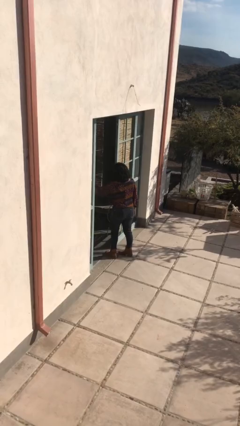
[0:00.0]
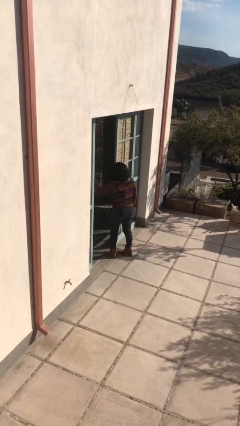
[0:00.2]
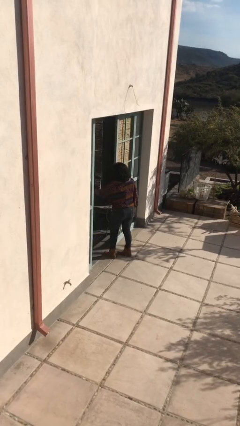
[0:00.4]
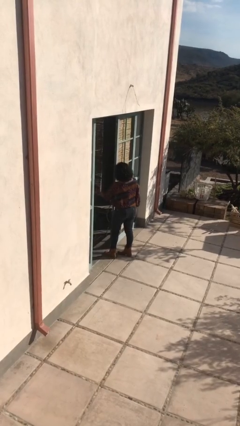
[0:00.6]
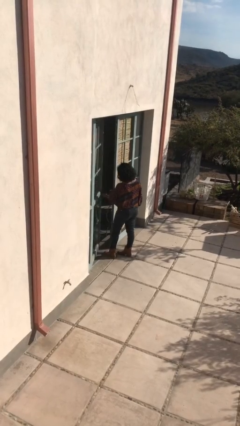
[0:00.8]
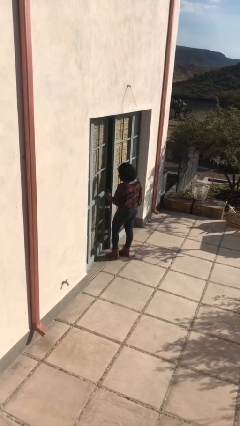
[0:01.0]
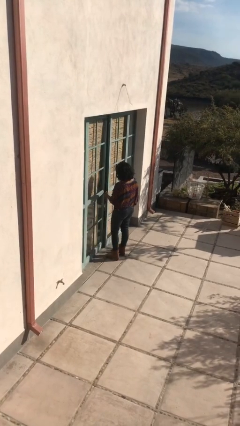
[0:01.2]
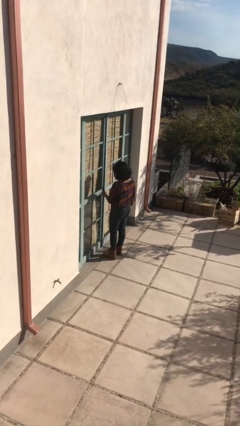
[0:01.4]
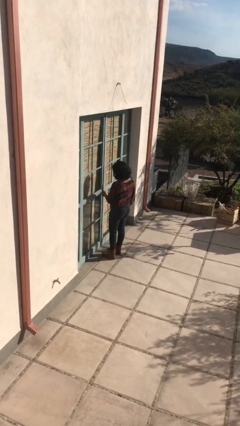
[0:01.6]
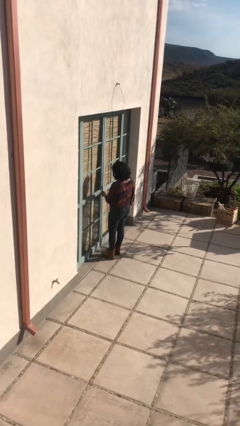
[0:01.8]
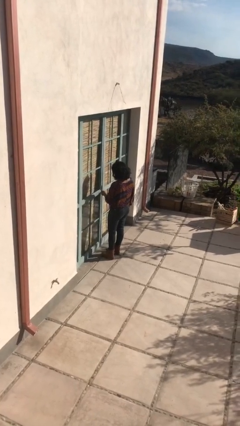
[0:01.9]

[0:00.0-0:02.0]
person closes facility door

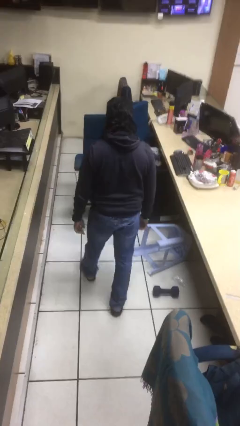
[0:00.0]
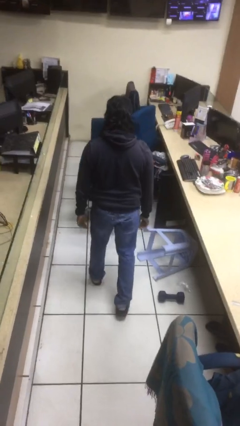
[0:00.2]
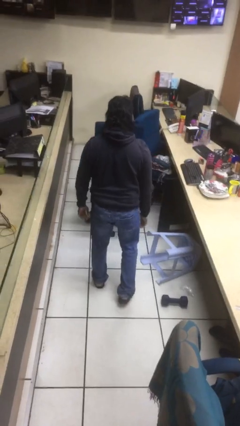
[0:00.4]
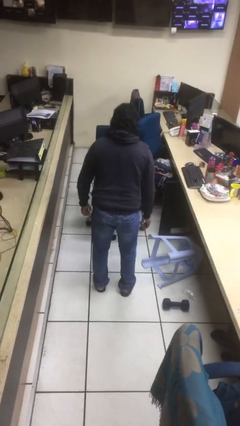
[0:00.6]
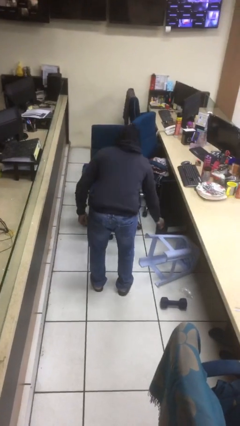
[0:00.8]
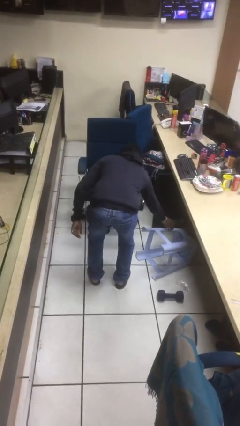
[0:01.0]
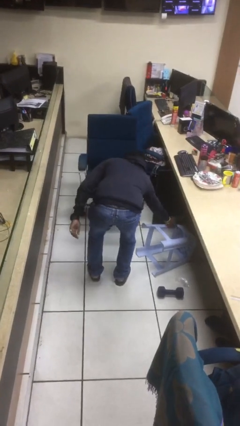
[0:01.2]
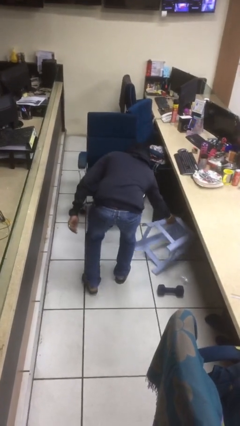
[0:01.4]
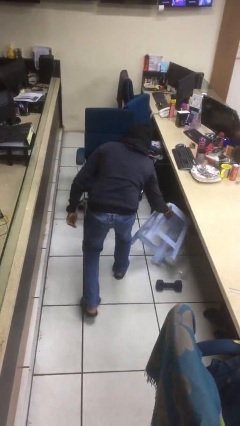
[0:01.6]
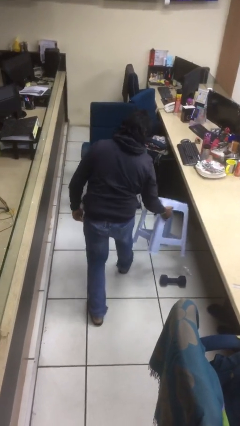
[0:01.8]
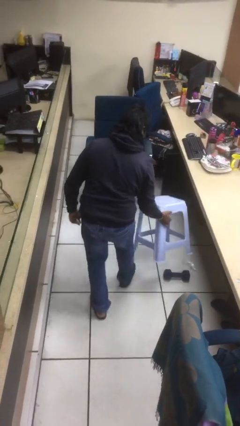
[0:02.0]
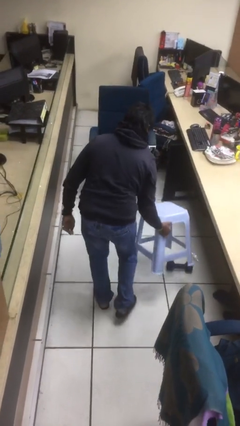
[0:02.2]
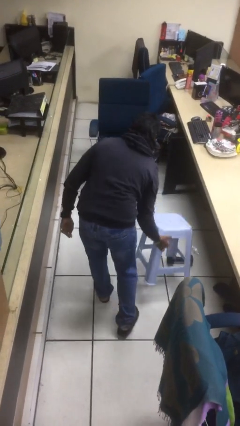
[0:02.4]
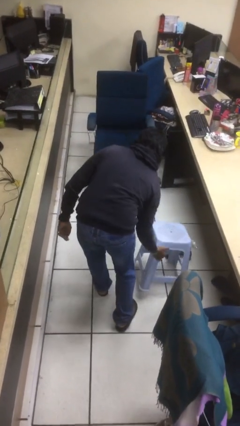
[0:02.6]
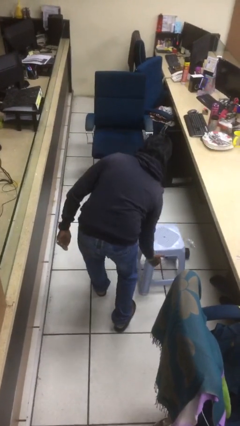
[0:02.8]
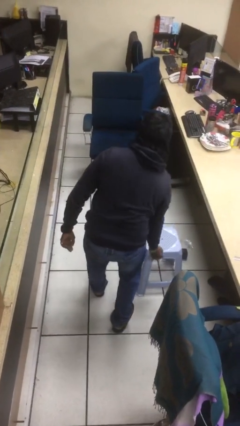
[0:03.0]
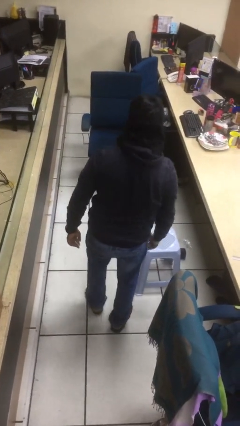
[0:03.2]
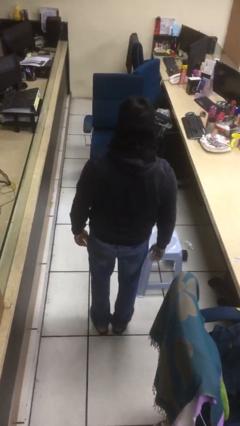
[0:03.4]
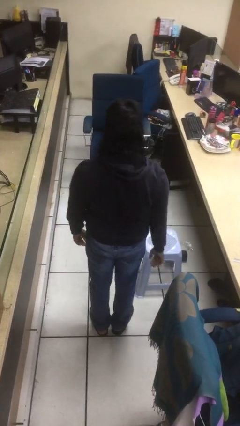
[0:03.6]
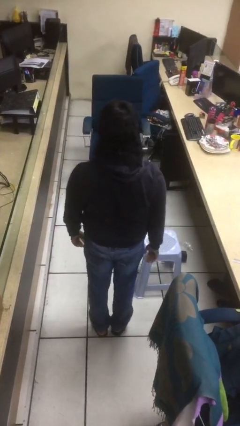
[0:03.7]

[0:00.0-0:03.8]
person sets upright furniture

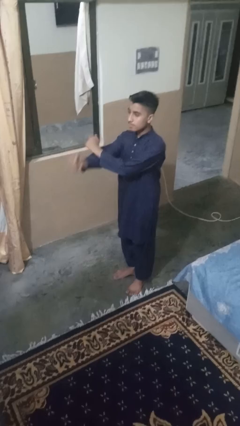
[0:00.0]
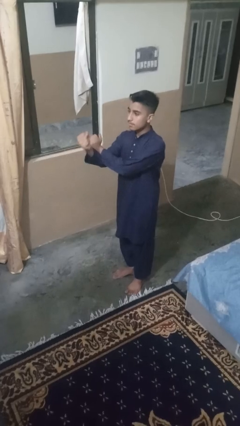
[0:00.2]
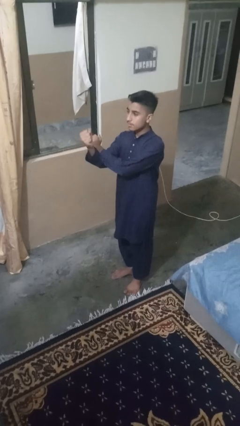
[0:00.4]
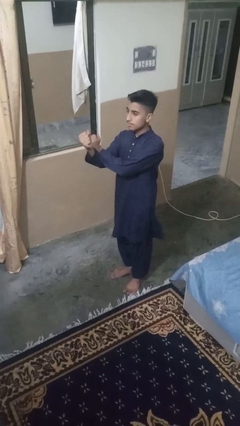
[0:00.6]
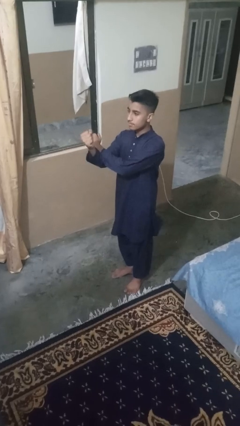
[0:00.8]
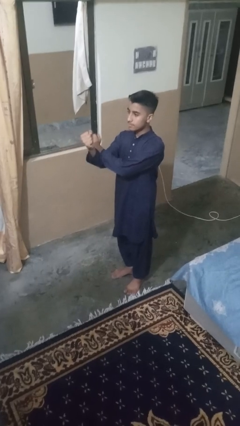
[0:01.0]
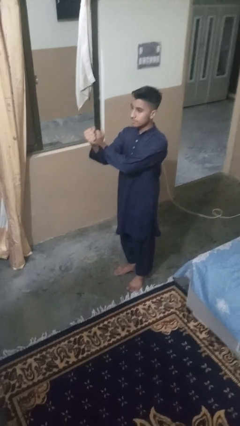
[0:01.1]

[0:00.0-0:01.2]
person crosses arms

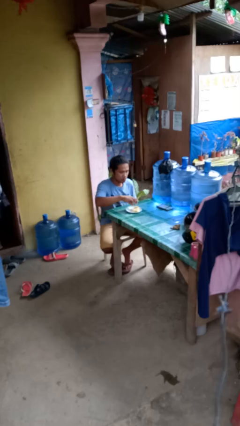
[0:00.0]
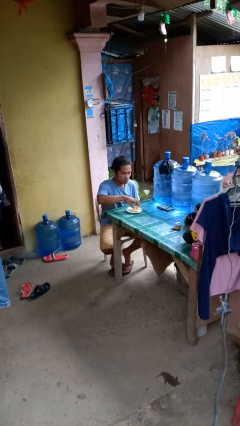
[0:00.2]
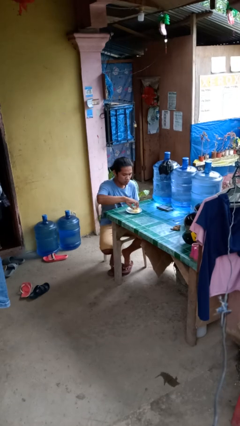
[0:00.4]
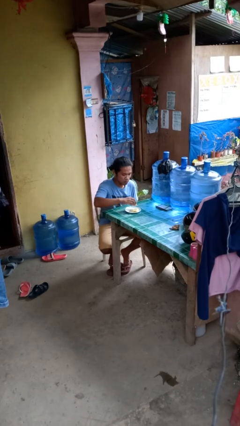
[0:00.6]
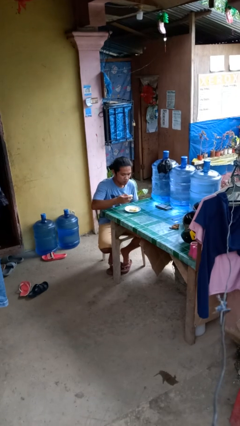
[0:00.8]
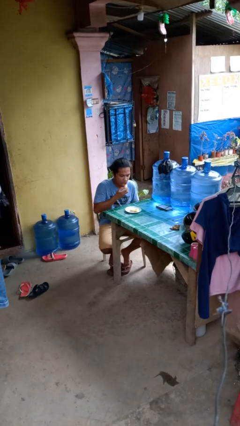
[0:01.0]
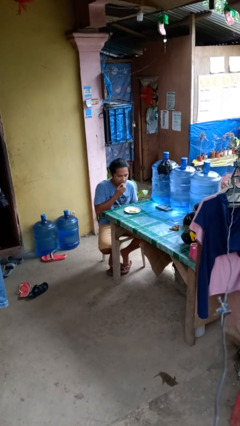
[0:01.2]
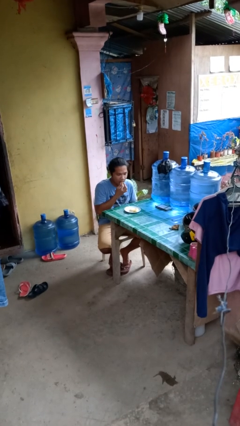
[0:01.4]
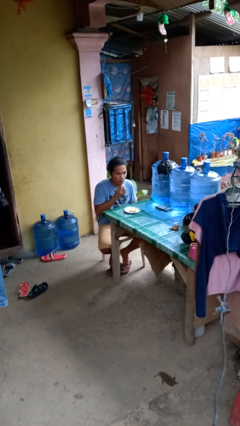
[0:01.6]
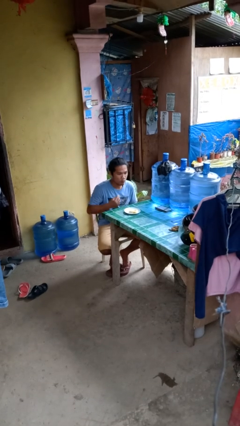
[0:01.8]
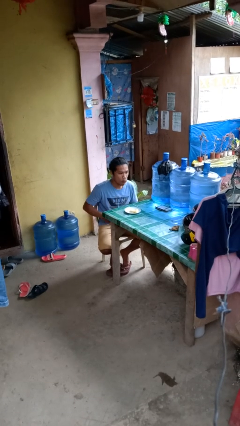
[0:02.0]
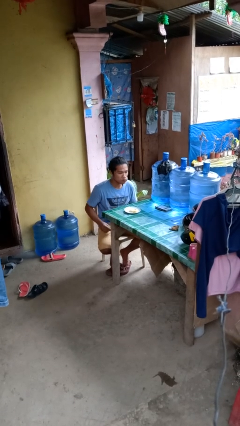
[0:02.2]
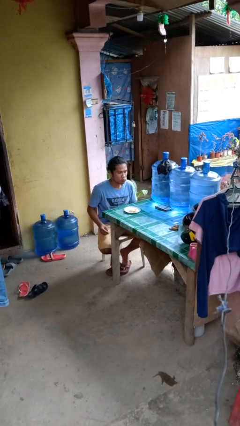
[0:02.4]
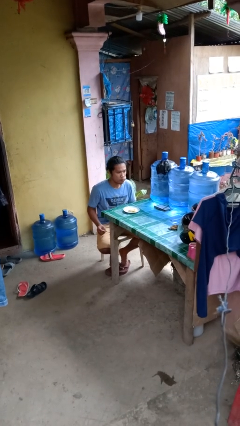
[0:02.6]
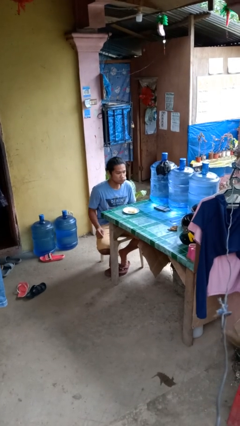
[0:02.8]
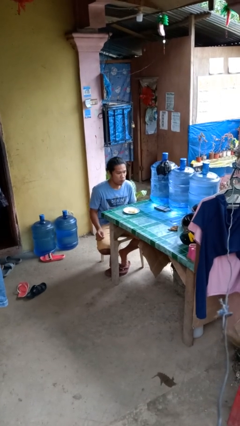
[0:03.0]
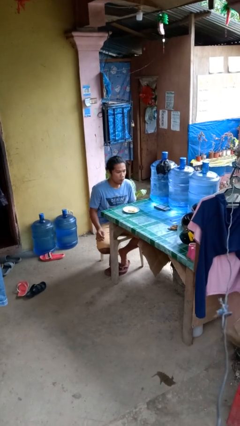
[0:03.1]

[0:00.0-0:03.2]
person eats with hands

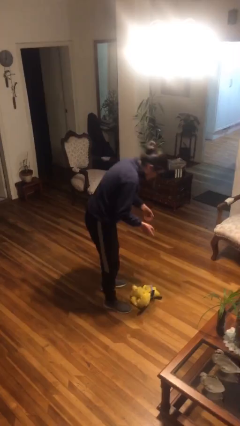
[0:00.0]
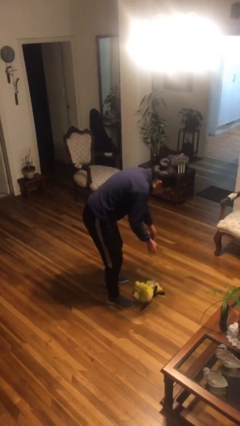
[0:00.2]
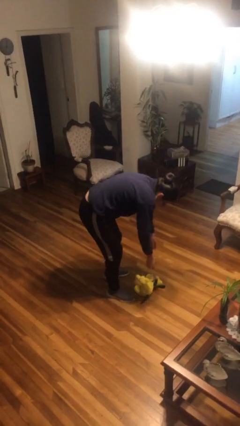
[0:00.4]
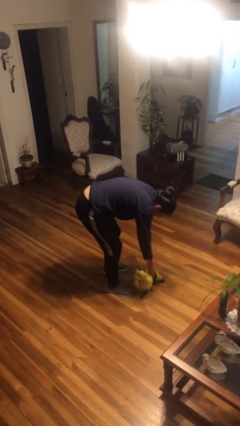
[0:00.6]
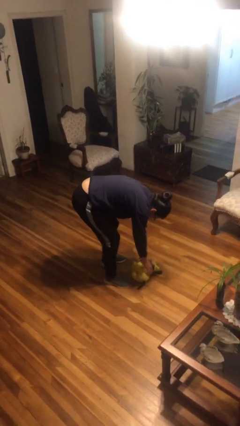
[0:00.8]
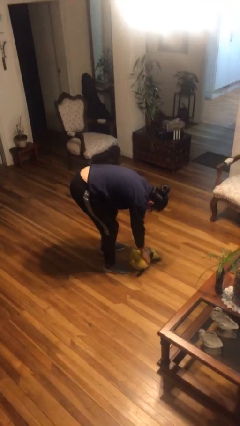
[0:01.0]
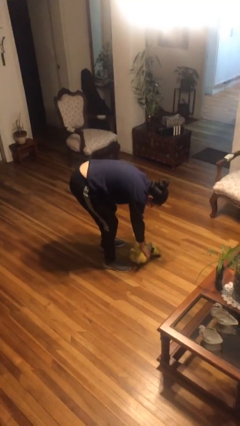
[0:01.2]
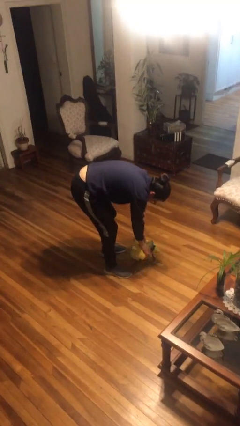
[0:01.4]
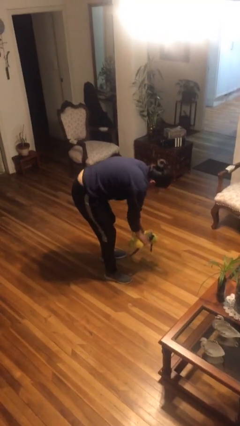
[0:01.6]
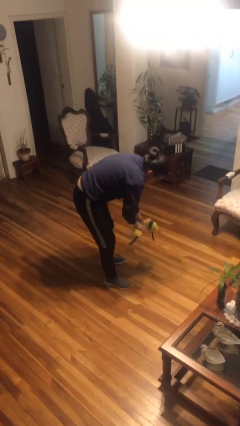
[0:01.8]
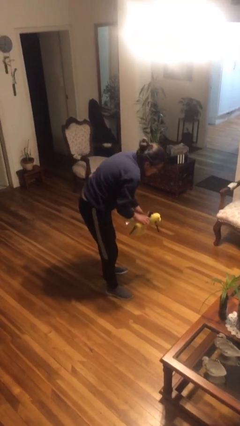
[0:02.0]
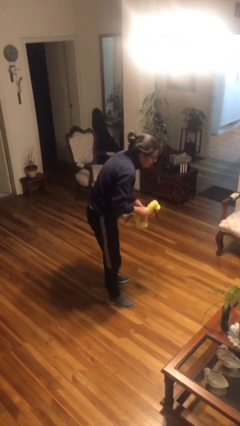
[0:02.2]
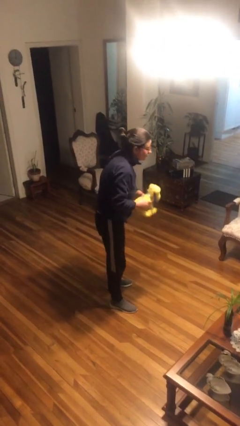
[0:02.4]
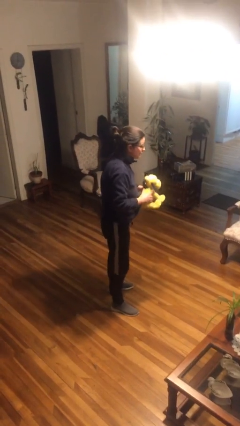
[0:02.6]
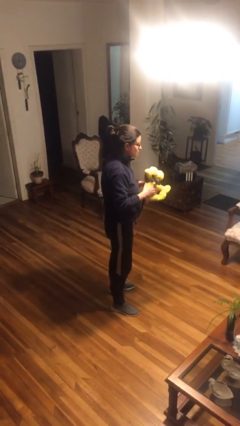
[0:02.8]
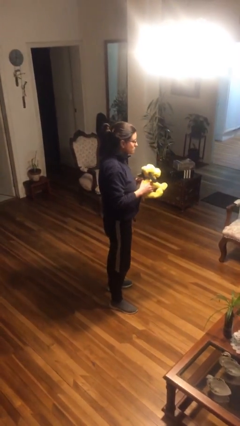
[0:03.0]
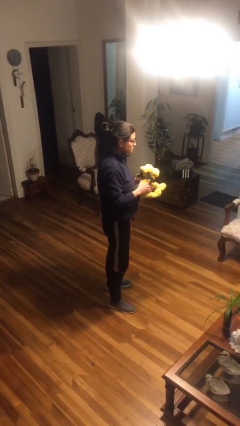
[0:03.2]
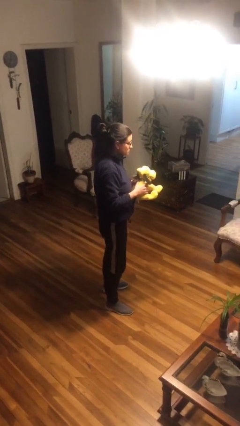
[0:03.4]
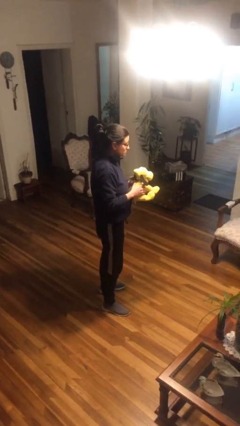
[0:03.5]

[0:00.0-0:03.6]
person picks up object from floor

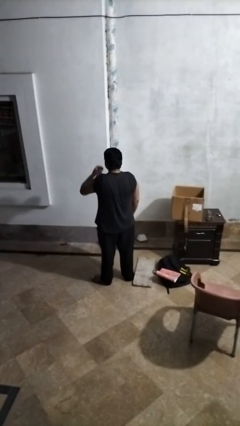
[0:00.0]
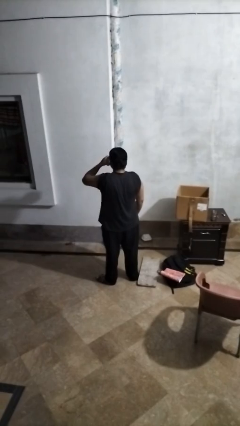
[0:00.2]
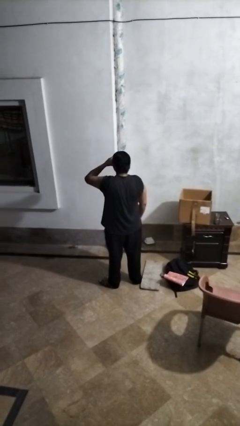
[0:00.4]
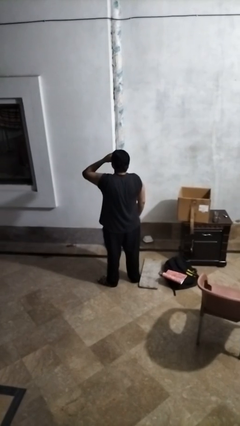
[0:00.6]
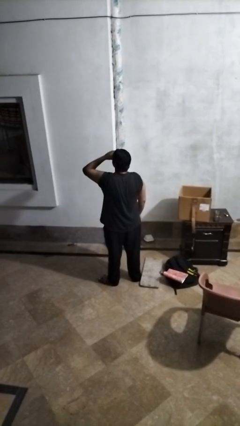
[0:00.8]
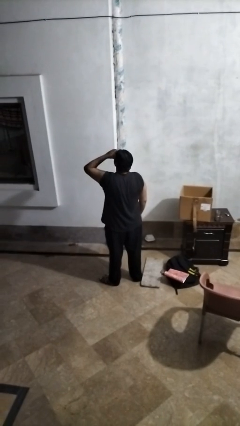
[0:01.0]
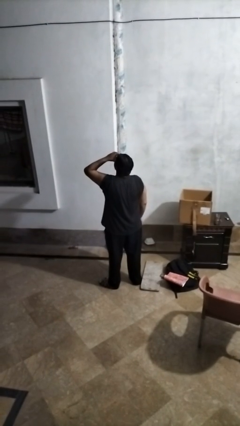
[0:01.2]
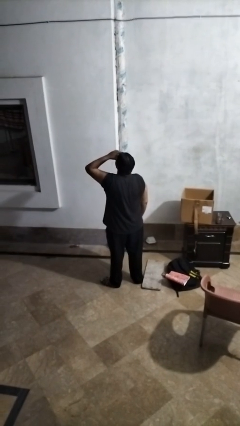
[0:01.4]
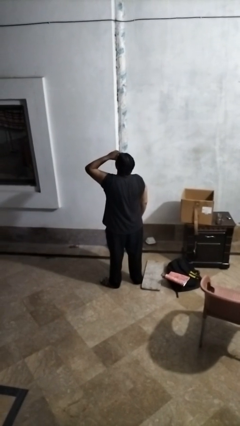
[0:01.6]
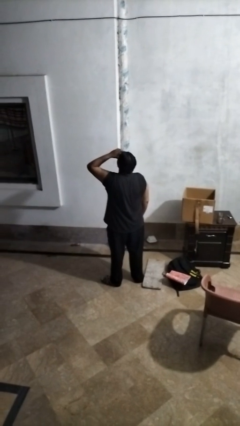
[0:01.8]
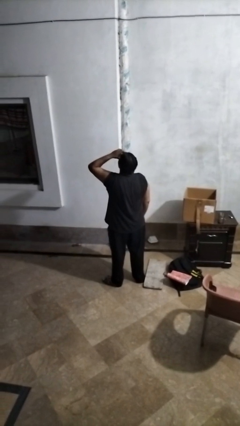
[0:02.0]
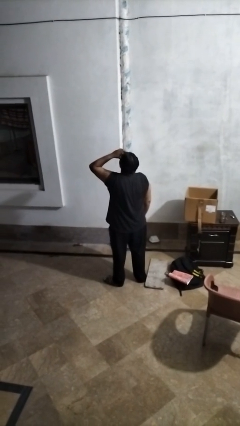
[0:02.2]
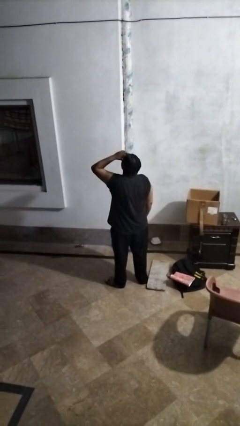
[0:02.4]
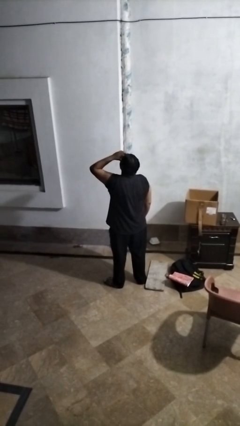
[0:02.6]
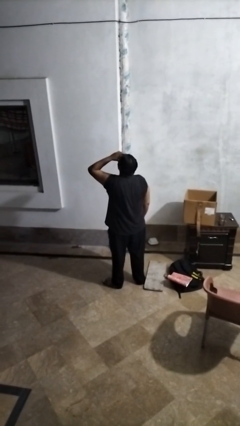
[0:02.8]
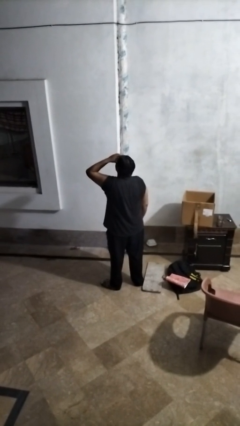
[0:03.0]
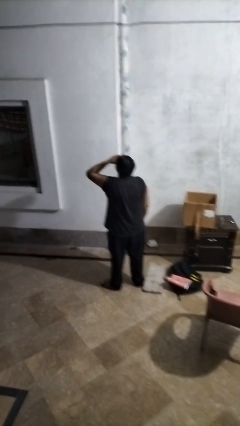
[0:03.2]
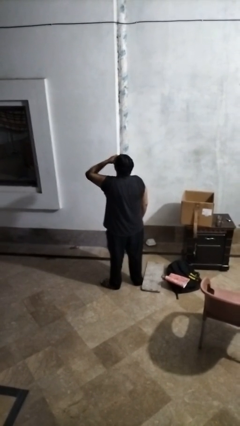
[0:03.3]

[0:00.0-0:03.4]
person drinks from beverage can
